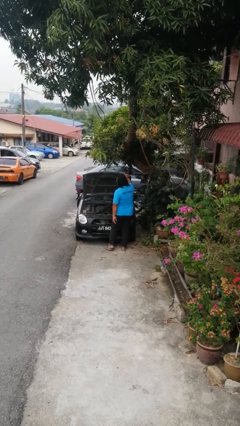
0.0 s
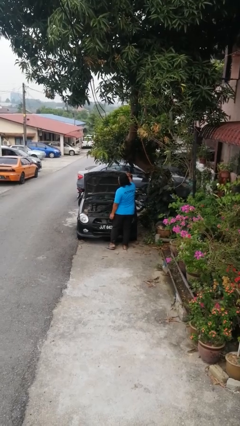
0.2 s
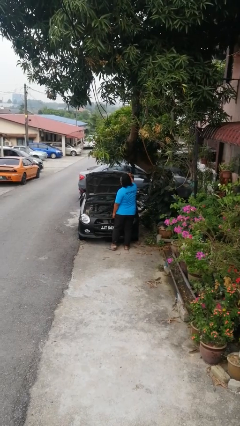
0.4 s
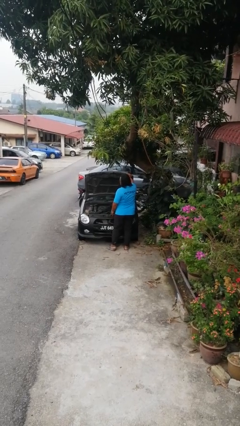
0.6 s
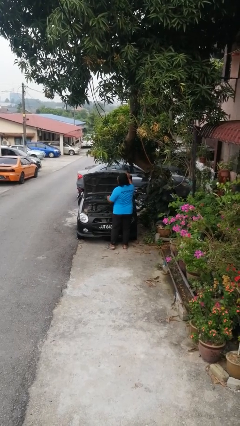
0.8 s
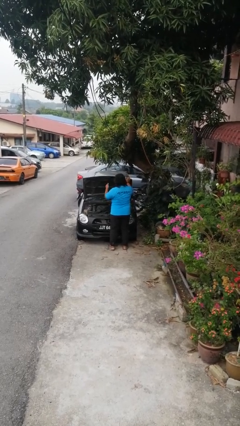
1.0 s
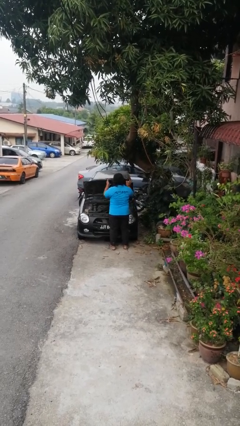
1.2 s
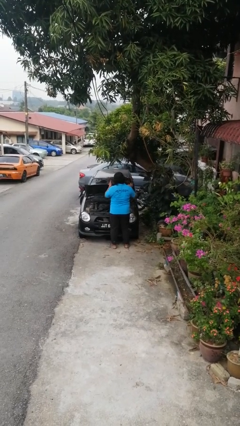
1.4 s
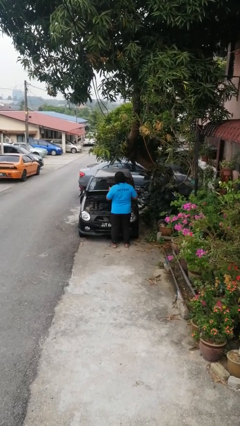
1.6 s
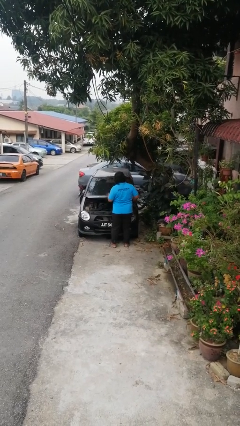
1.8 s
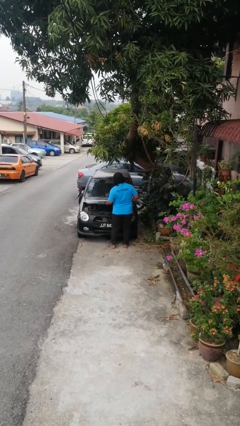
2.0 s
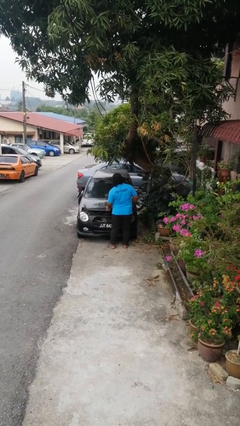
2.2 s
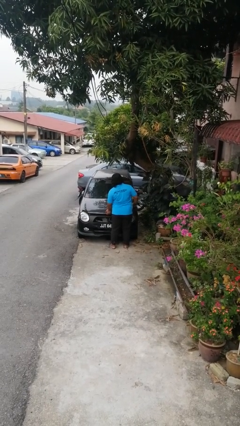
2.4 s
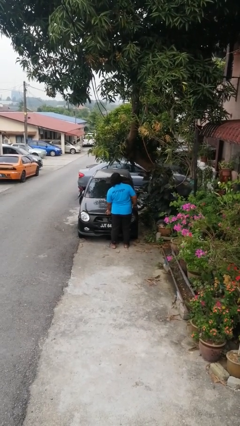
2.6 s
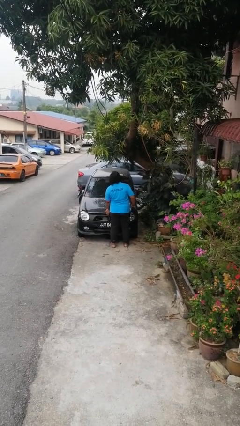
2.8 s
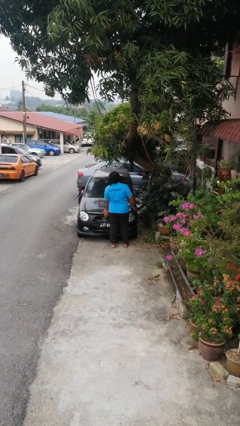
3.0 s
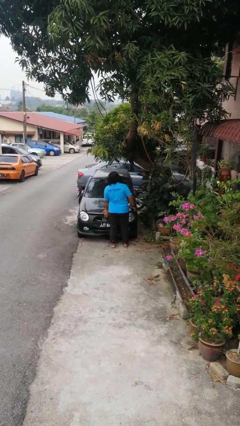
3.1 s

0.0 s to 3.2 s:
person closes car hood

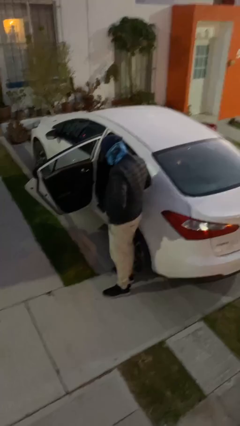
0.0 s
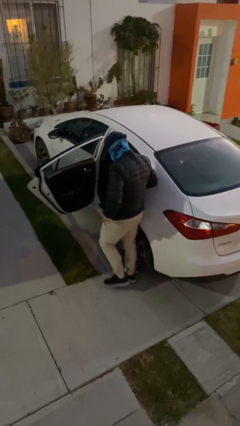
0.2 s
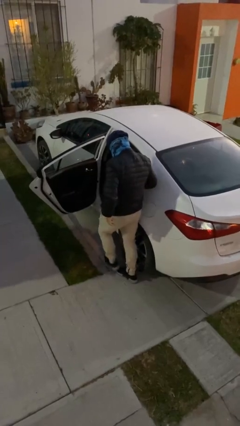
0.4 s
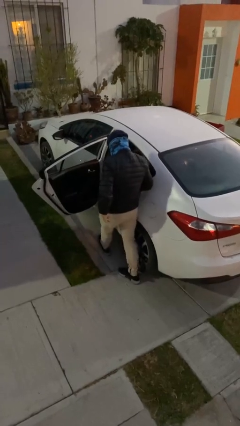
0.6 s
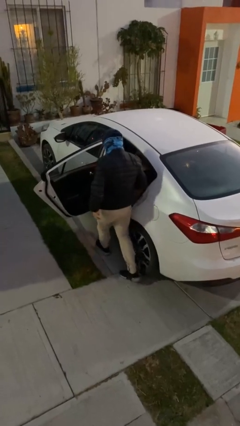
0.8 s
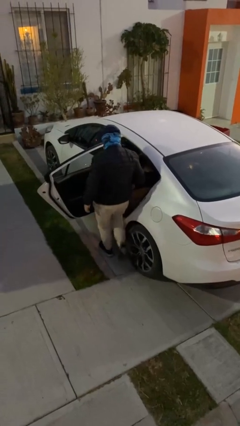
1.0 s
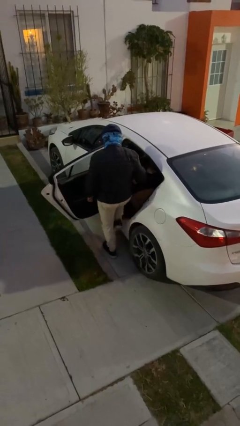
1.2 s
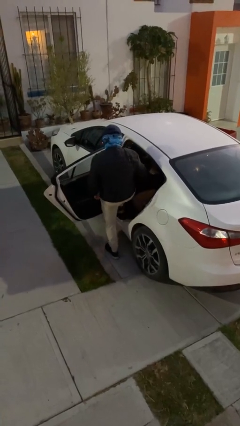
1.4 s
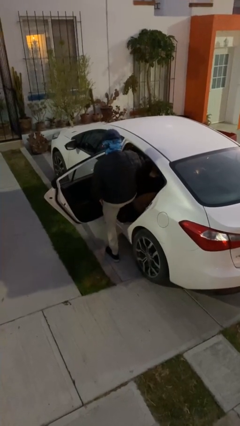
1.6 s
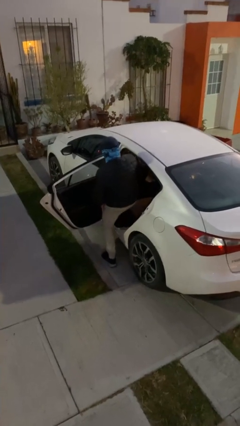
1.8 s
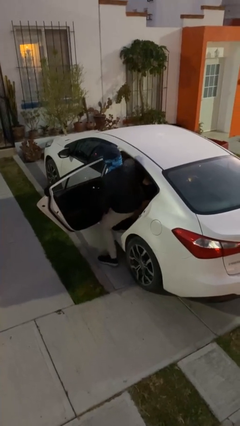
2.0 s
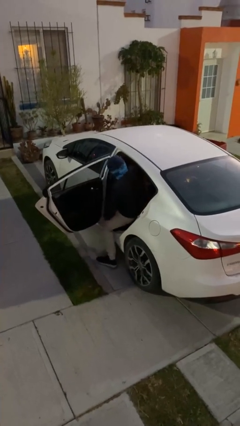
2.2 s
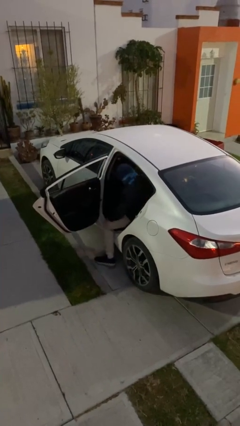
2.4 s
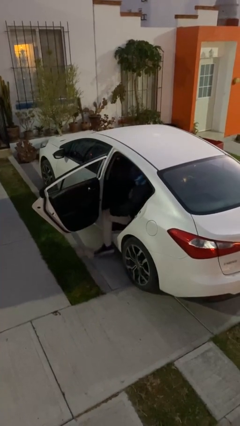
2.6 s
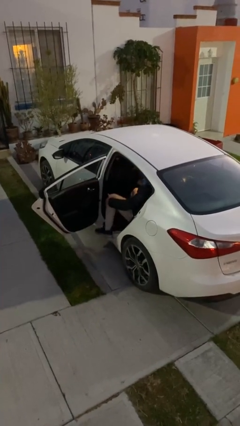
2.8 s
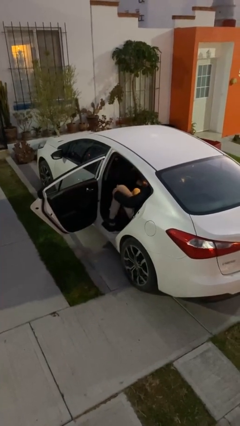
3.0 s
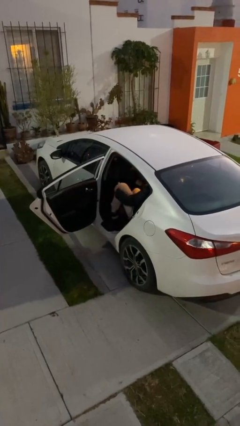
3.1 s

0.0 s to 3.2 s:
person enters car

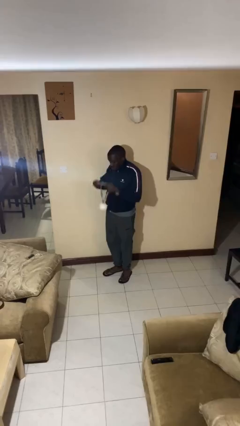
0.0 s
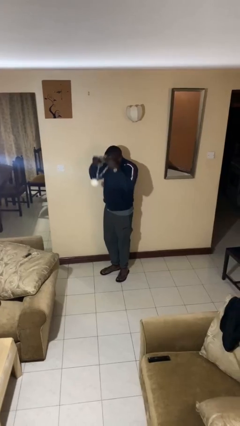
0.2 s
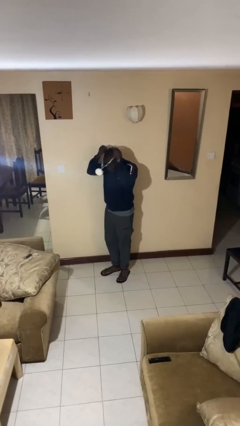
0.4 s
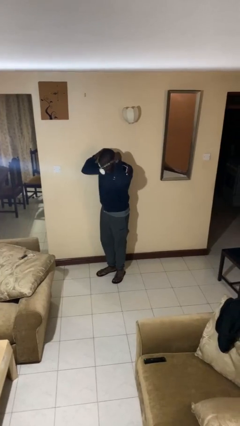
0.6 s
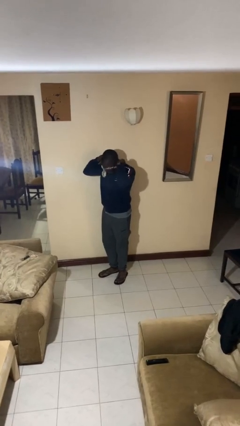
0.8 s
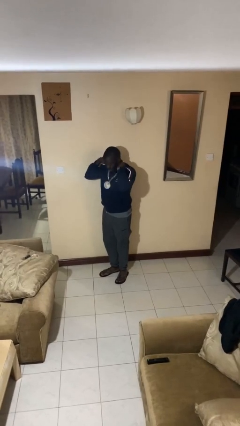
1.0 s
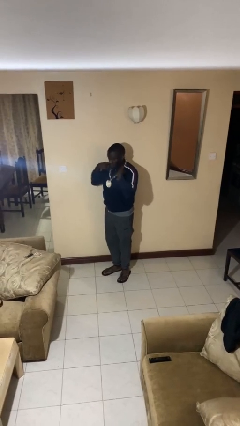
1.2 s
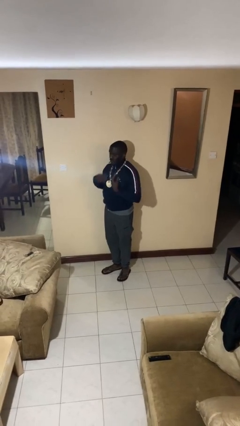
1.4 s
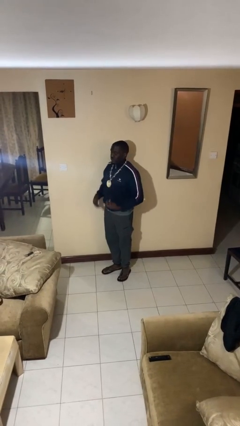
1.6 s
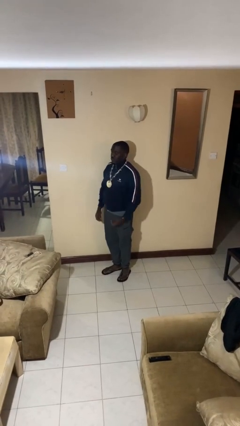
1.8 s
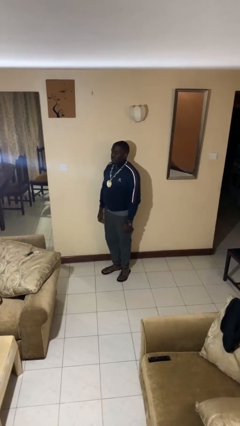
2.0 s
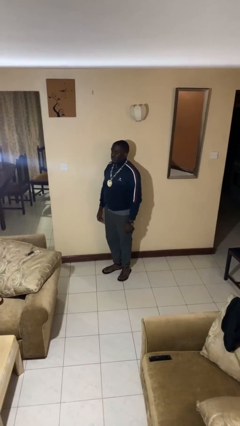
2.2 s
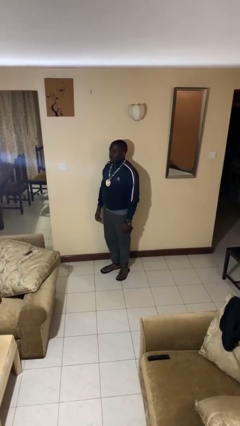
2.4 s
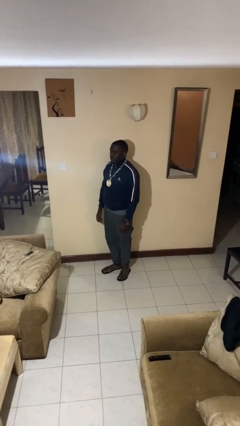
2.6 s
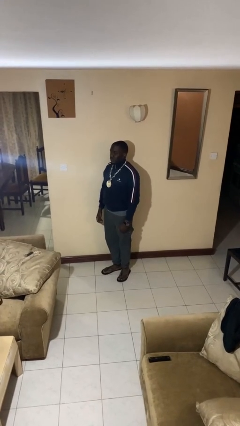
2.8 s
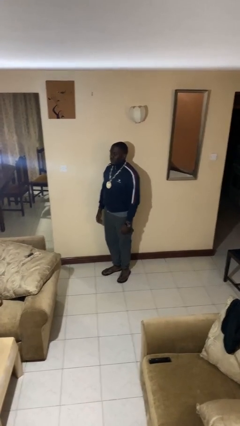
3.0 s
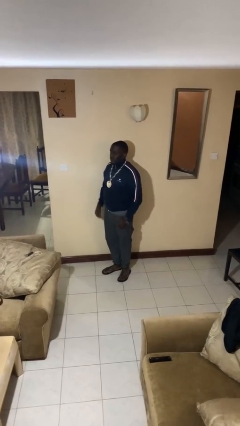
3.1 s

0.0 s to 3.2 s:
person puts on necklace

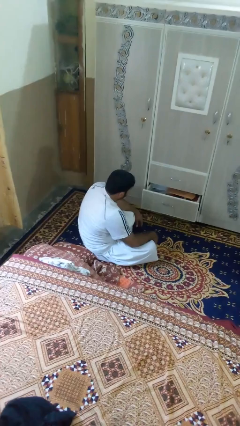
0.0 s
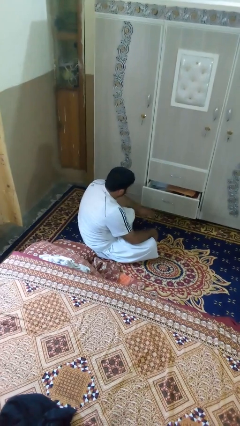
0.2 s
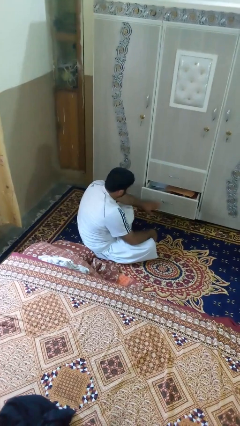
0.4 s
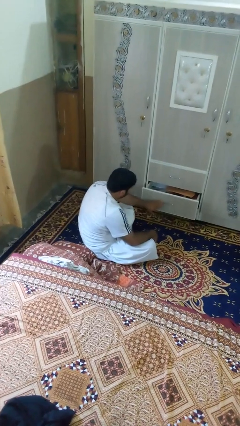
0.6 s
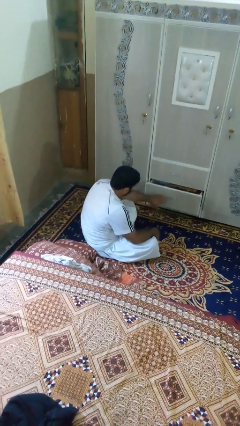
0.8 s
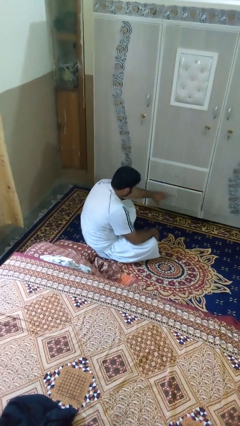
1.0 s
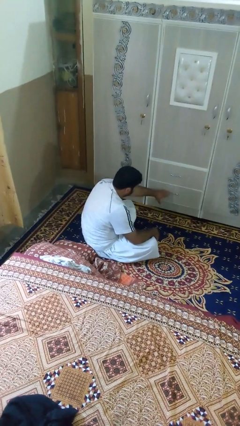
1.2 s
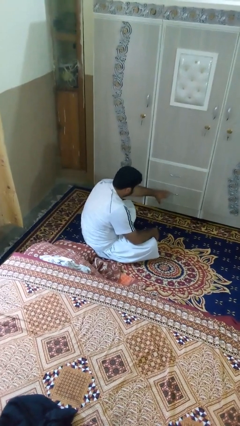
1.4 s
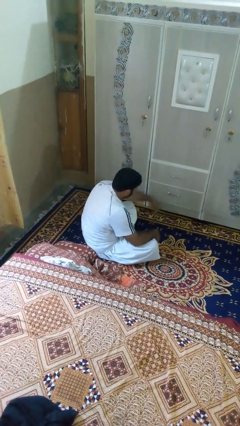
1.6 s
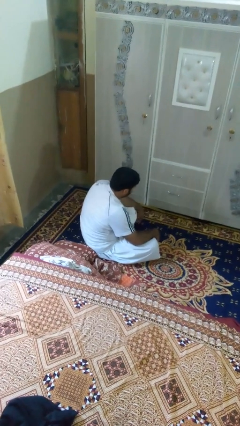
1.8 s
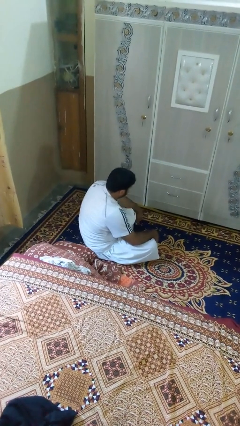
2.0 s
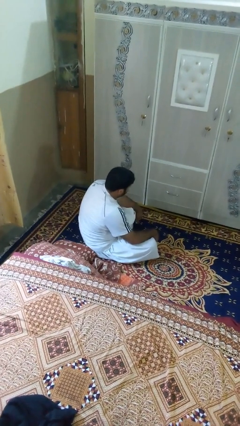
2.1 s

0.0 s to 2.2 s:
person closes dresser drawer

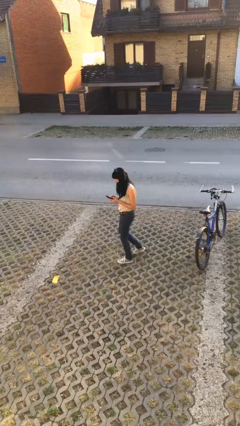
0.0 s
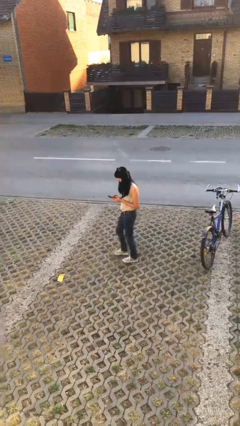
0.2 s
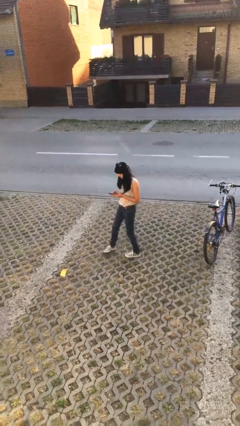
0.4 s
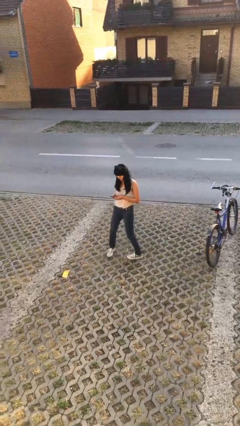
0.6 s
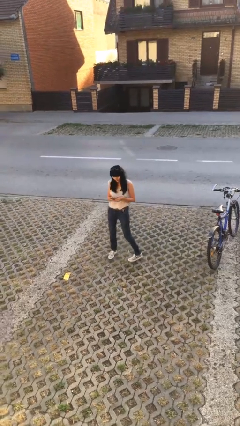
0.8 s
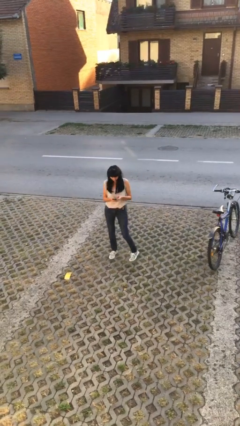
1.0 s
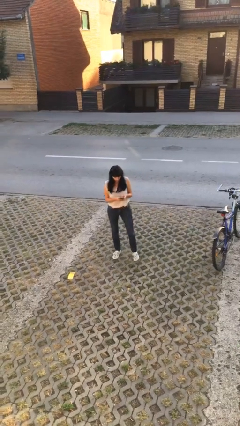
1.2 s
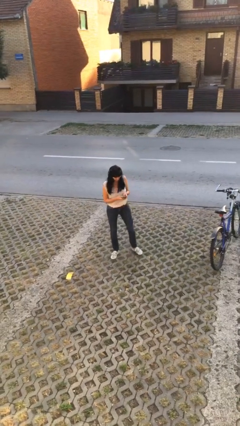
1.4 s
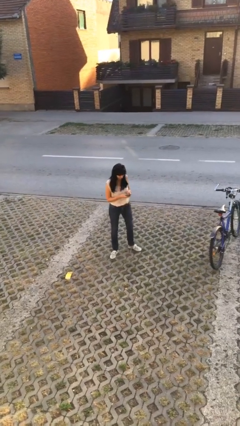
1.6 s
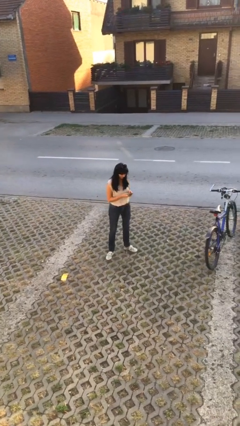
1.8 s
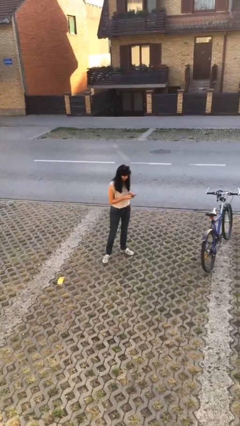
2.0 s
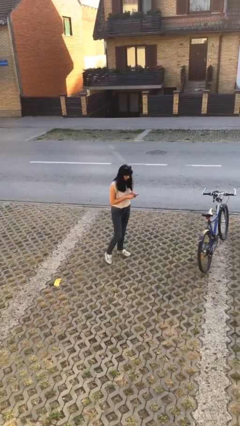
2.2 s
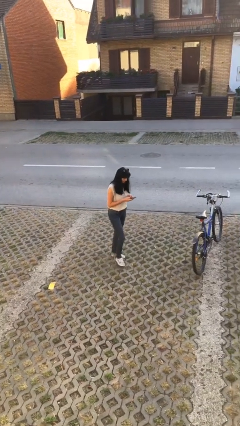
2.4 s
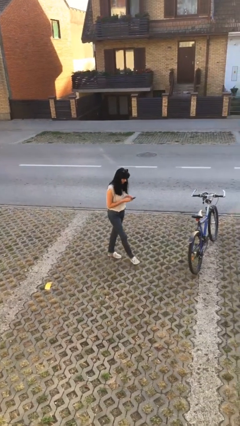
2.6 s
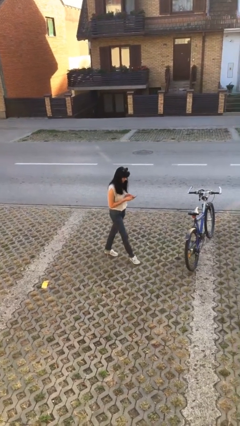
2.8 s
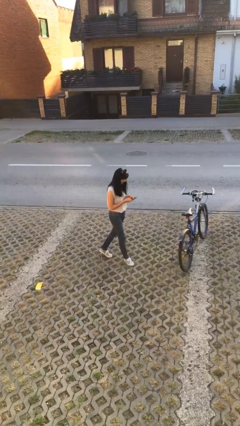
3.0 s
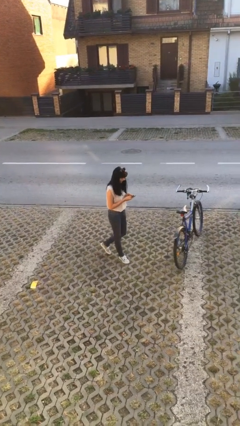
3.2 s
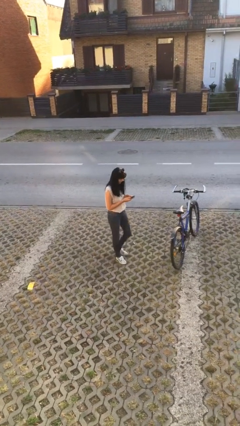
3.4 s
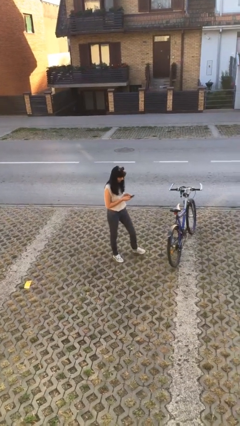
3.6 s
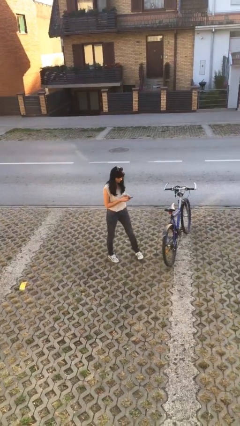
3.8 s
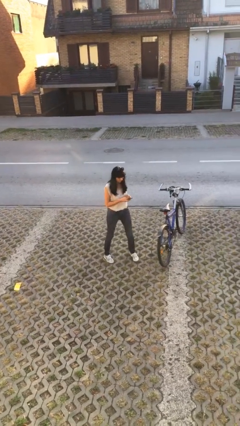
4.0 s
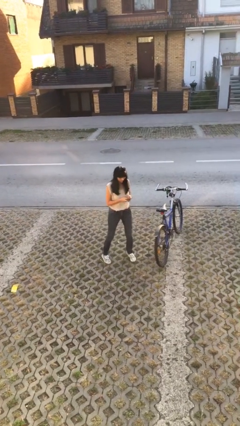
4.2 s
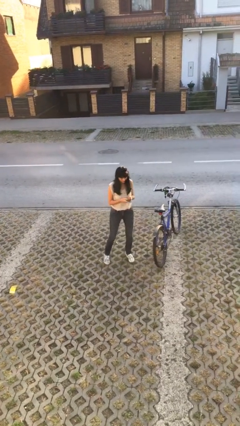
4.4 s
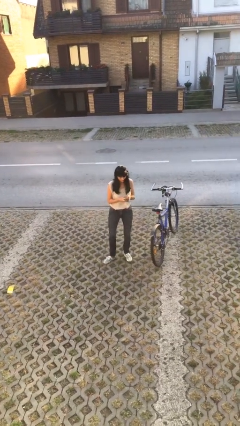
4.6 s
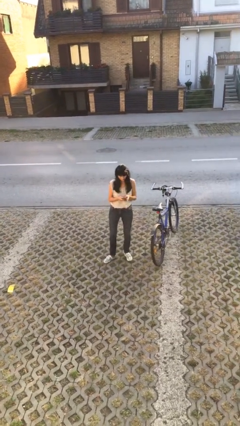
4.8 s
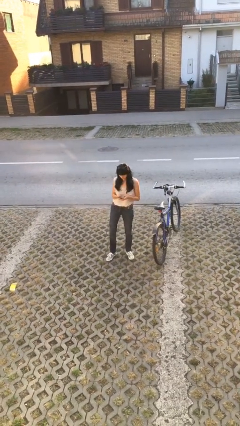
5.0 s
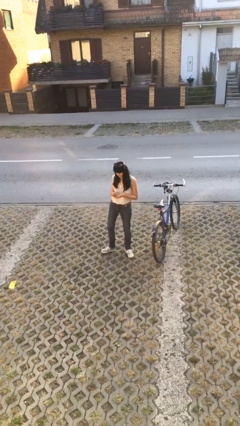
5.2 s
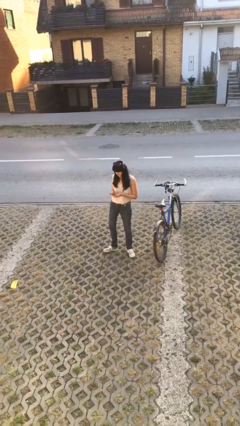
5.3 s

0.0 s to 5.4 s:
person texts on phone

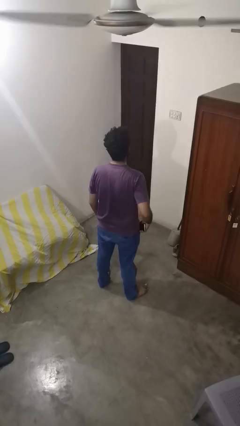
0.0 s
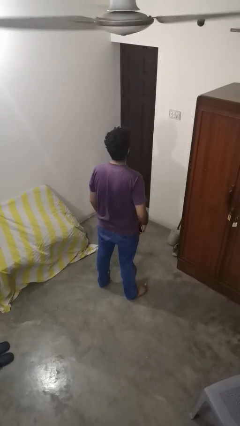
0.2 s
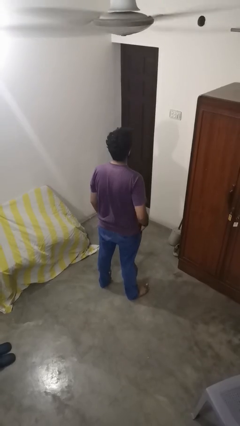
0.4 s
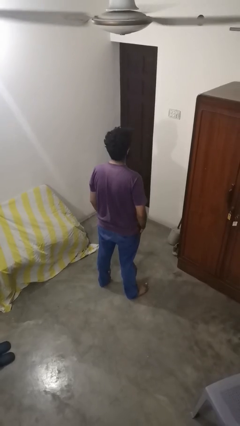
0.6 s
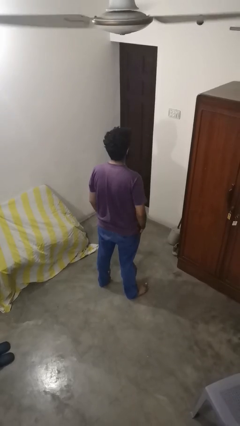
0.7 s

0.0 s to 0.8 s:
person puts phone into pocket
